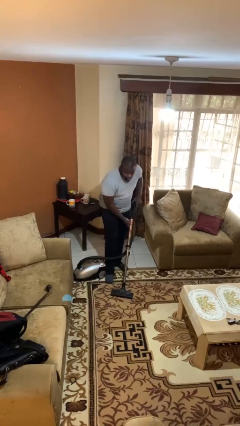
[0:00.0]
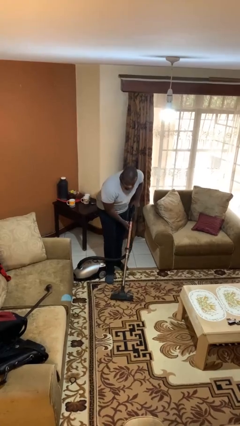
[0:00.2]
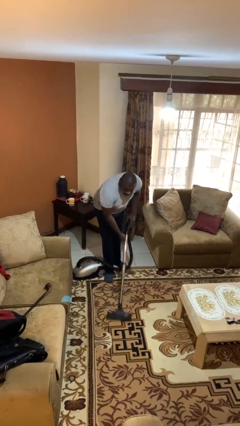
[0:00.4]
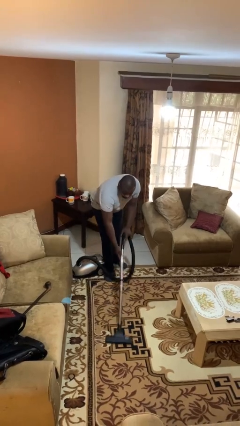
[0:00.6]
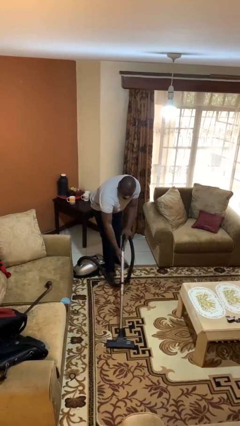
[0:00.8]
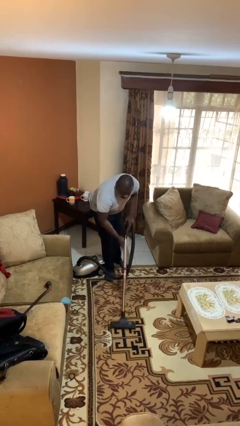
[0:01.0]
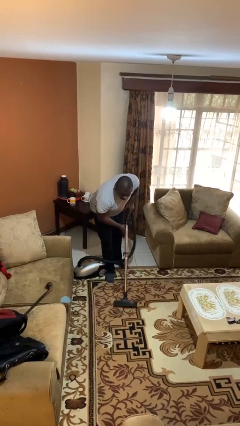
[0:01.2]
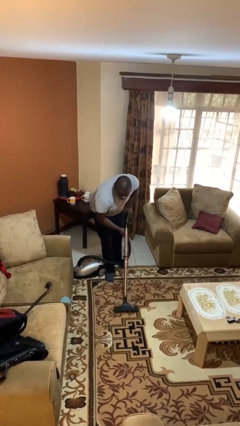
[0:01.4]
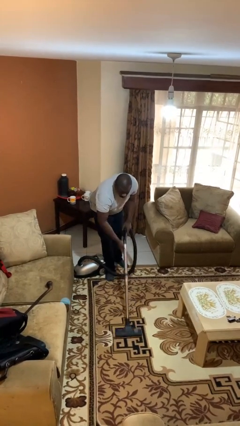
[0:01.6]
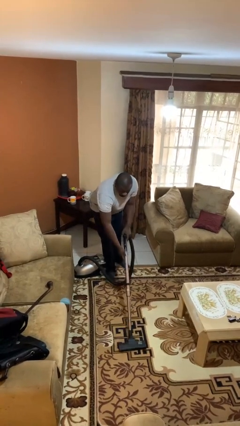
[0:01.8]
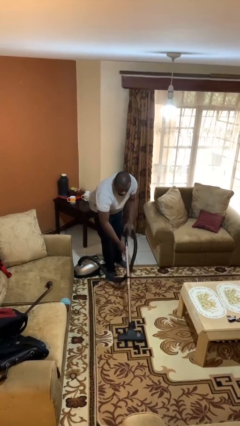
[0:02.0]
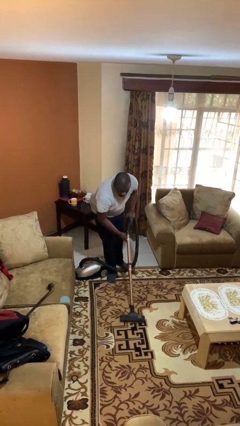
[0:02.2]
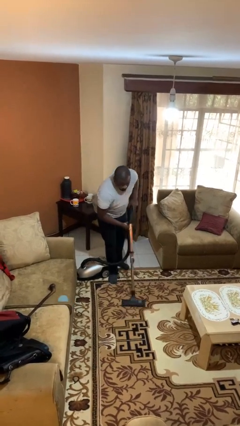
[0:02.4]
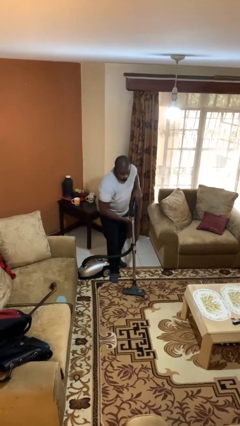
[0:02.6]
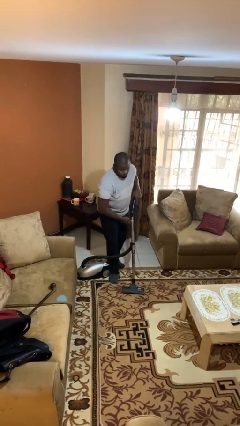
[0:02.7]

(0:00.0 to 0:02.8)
person vacuums carpet

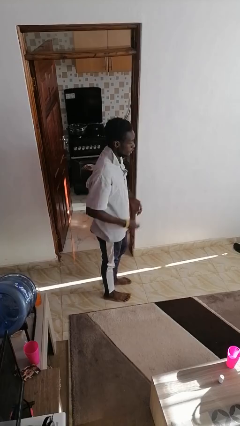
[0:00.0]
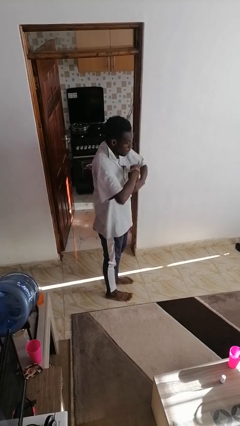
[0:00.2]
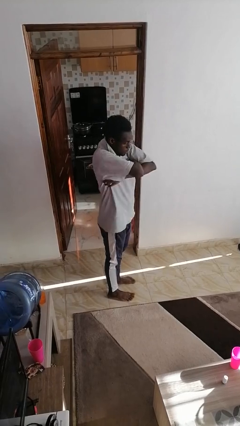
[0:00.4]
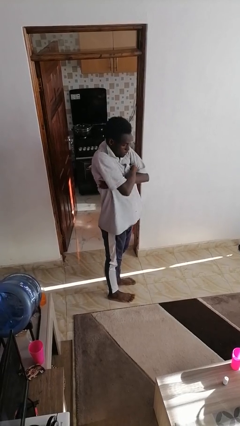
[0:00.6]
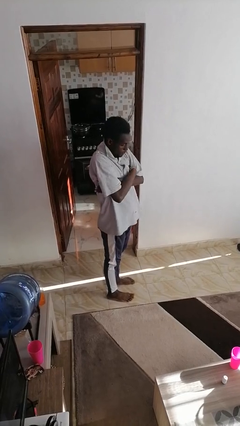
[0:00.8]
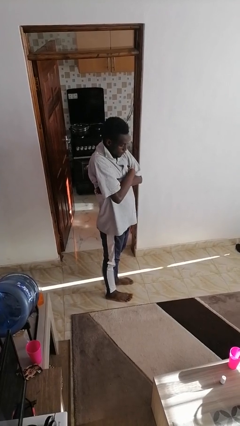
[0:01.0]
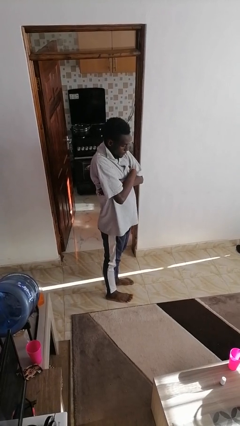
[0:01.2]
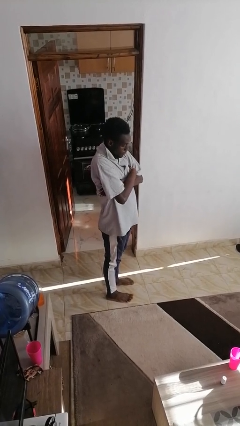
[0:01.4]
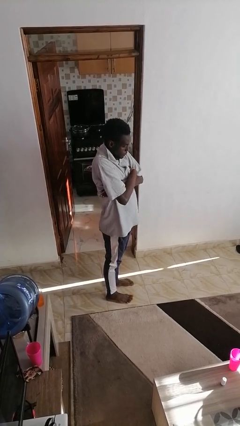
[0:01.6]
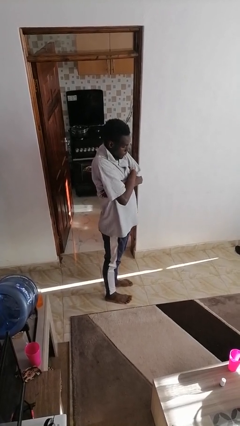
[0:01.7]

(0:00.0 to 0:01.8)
person crosses arms

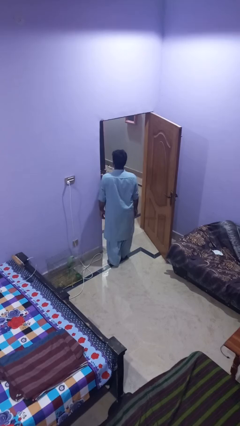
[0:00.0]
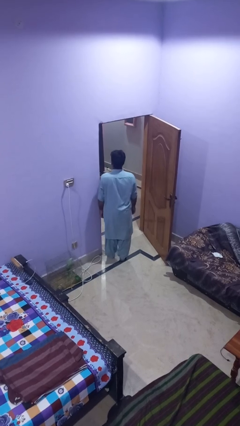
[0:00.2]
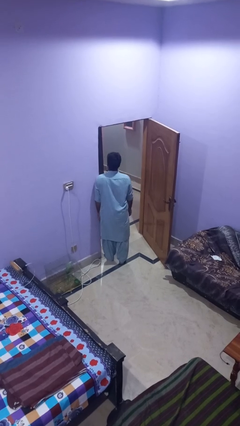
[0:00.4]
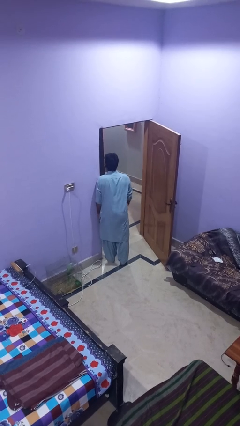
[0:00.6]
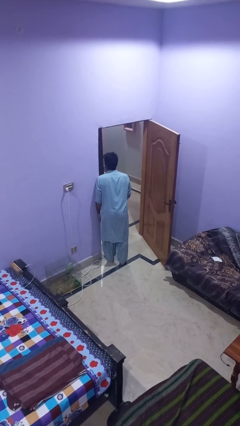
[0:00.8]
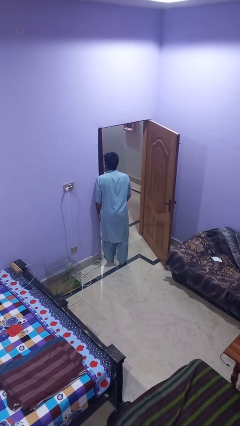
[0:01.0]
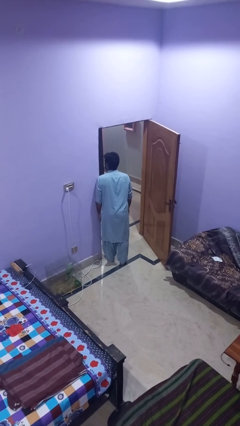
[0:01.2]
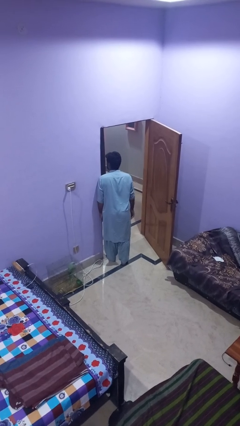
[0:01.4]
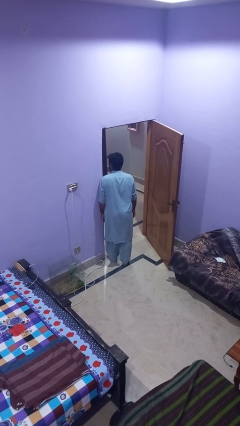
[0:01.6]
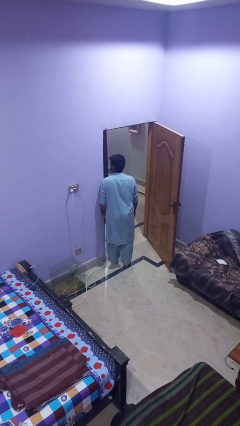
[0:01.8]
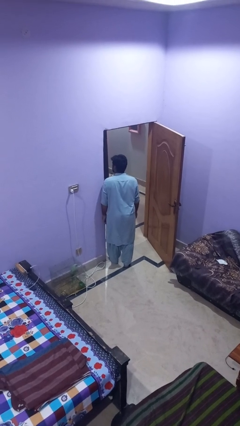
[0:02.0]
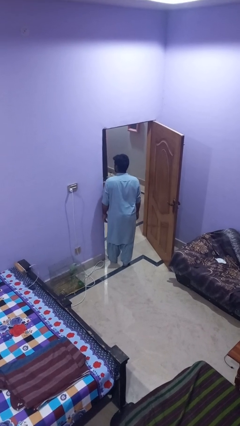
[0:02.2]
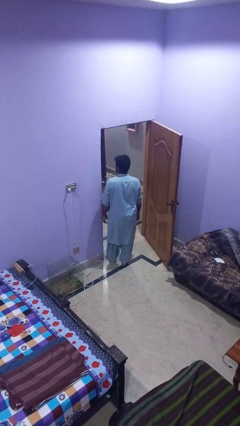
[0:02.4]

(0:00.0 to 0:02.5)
person bumps into wall

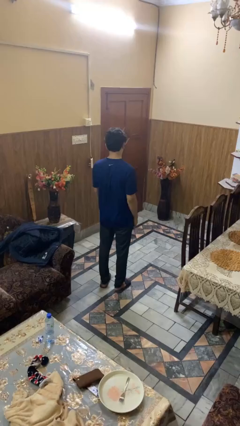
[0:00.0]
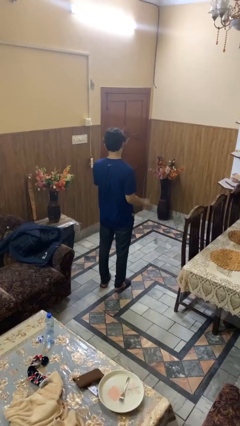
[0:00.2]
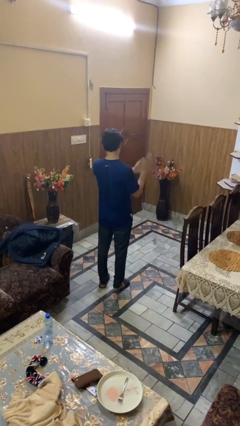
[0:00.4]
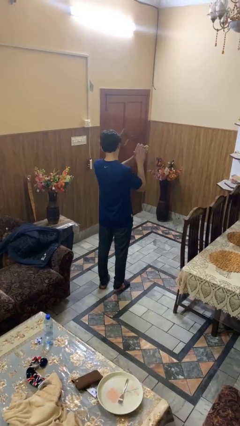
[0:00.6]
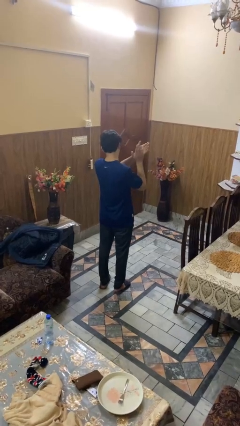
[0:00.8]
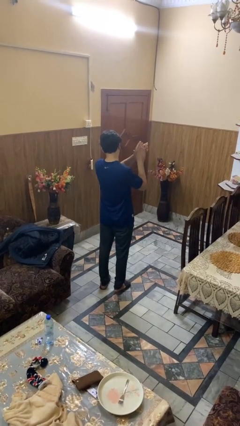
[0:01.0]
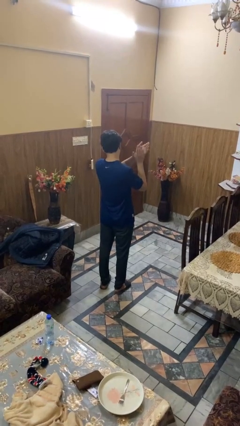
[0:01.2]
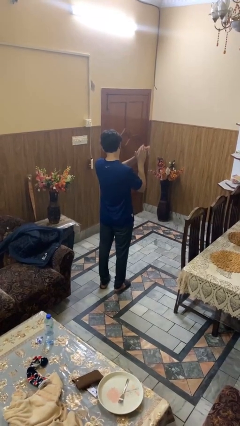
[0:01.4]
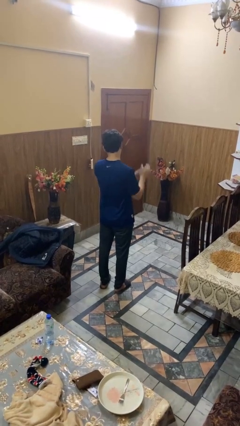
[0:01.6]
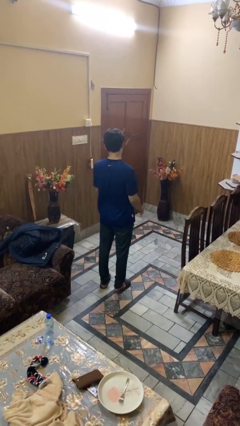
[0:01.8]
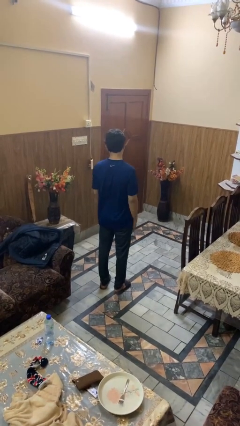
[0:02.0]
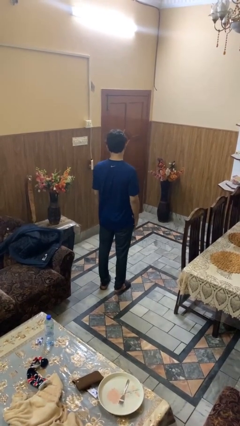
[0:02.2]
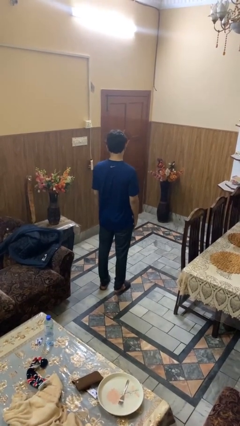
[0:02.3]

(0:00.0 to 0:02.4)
person claps hands

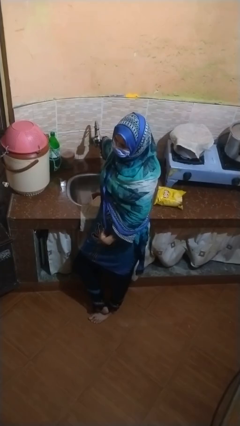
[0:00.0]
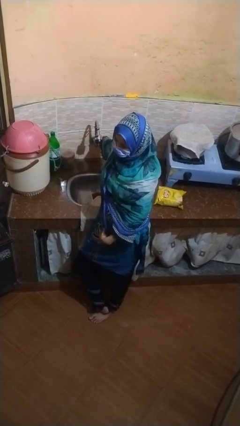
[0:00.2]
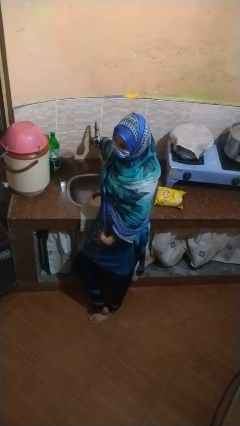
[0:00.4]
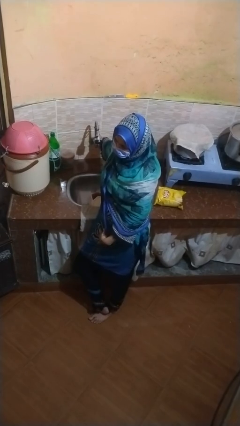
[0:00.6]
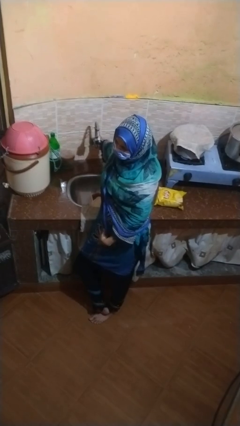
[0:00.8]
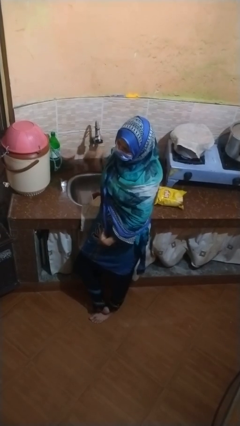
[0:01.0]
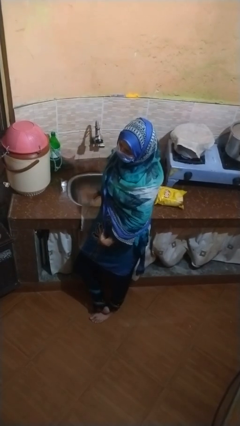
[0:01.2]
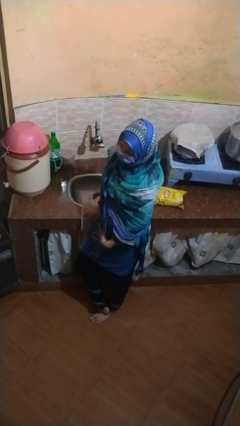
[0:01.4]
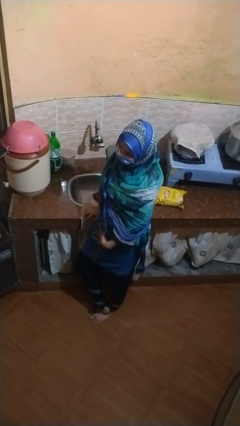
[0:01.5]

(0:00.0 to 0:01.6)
person turns off faucet

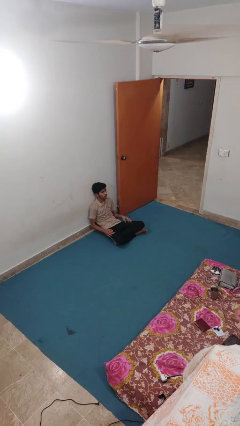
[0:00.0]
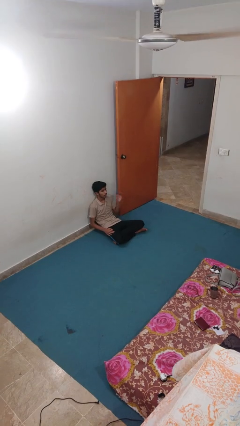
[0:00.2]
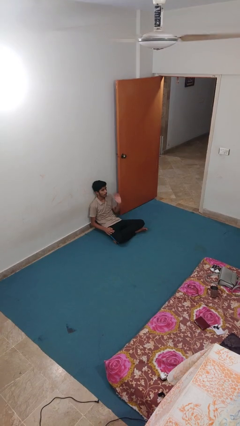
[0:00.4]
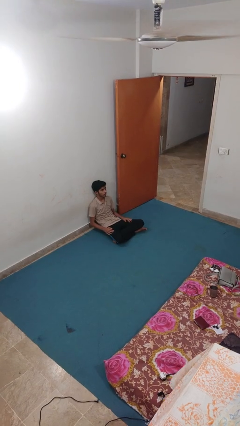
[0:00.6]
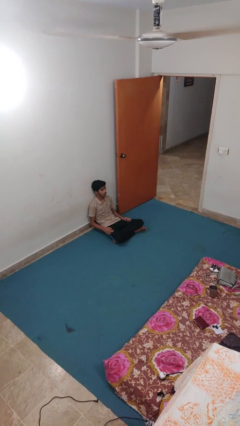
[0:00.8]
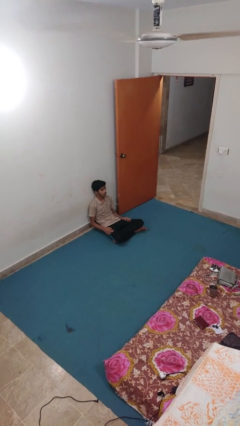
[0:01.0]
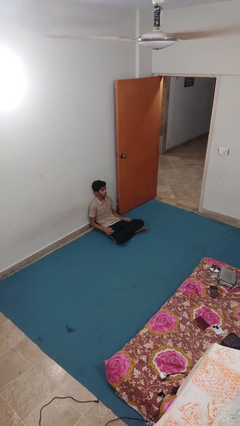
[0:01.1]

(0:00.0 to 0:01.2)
person slaps hands on thighs

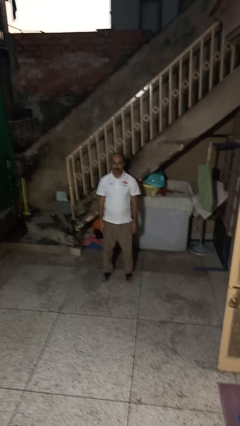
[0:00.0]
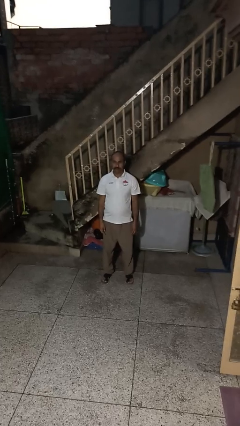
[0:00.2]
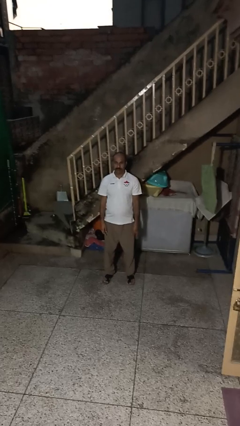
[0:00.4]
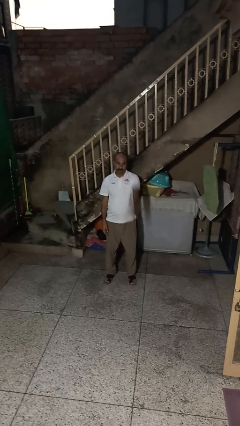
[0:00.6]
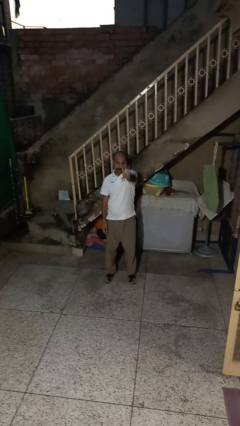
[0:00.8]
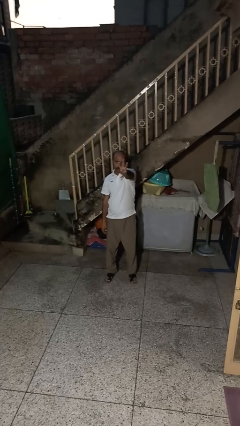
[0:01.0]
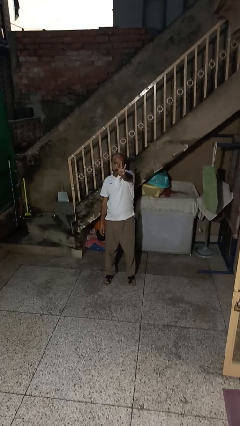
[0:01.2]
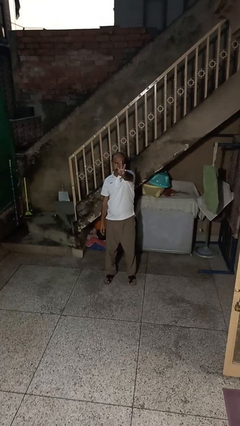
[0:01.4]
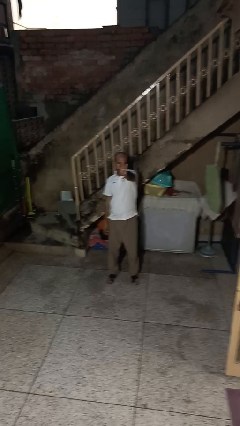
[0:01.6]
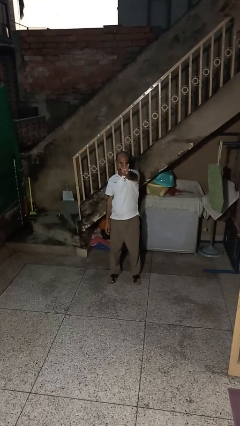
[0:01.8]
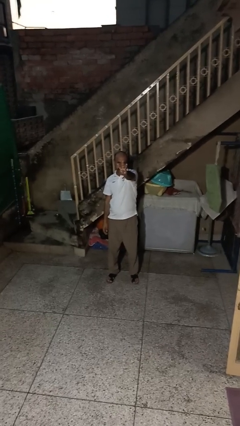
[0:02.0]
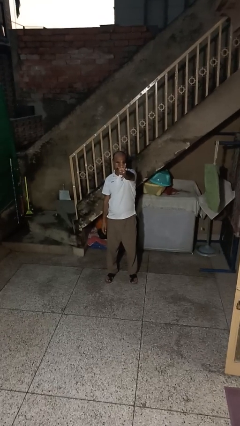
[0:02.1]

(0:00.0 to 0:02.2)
person gestures number three

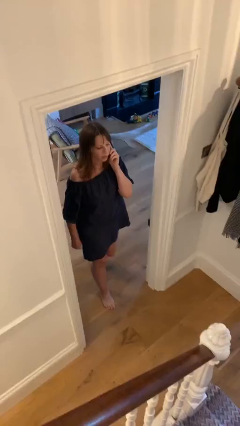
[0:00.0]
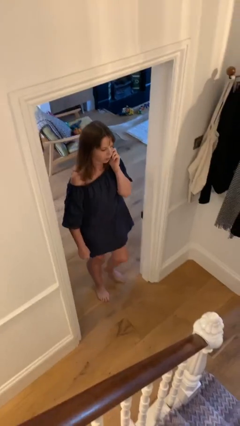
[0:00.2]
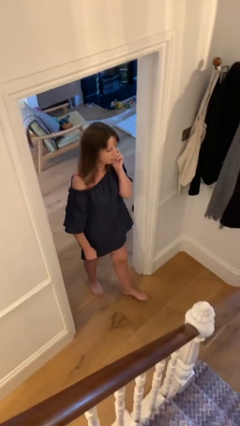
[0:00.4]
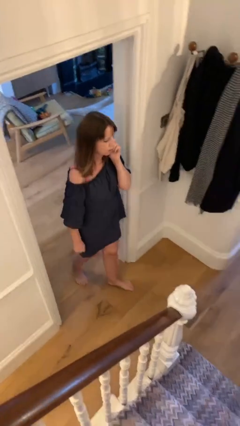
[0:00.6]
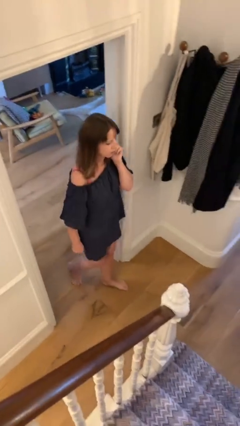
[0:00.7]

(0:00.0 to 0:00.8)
person enters scene through structure

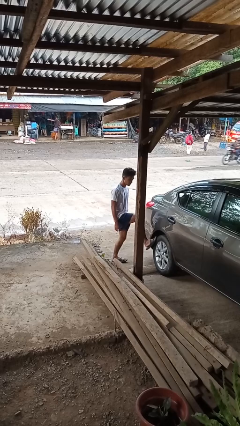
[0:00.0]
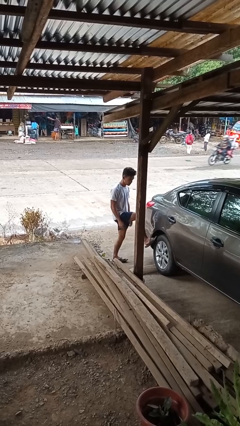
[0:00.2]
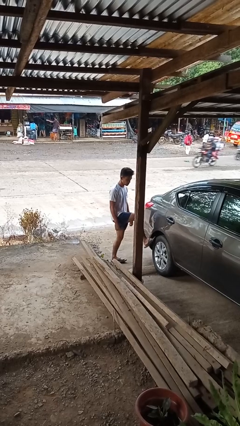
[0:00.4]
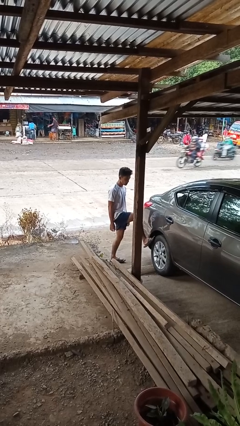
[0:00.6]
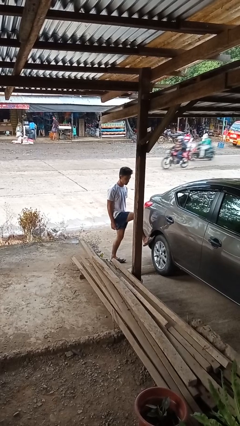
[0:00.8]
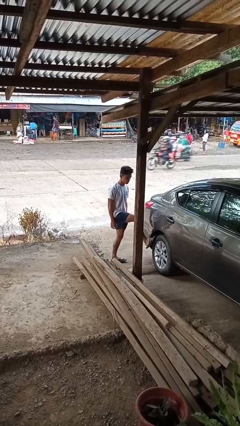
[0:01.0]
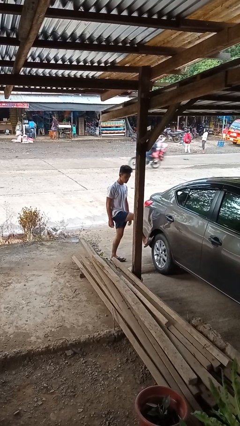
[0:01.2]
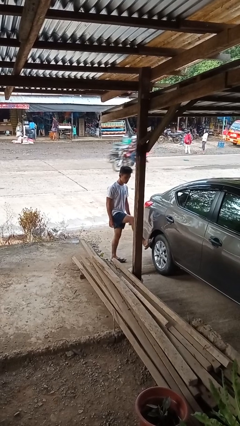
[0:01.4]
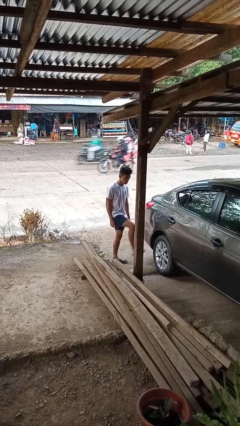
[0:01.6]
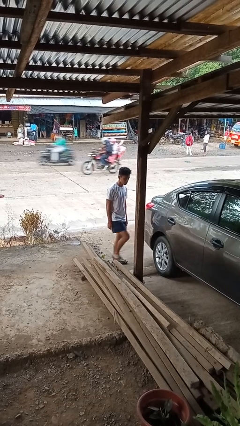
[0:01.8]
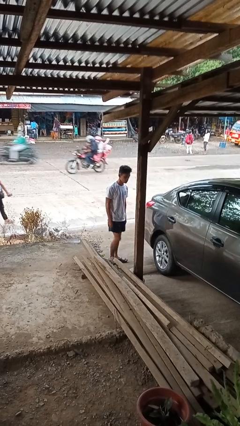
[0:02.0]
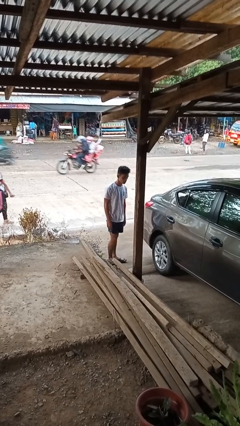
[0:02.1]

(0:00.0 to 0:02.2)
person kicks car tires
